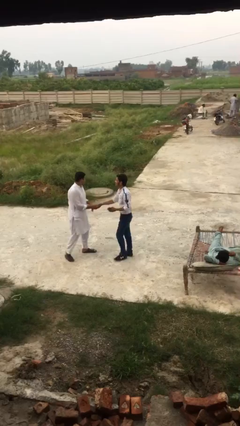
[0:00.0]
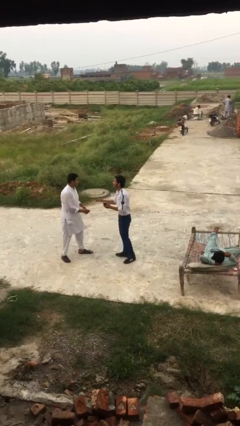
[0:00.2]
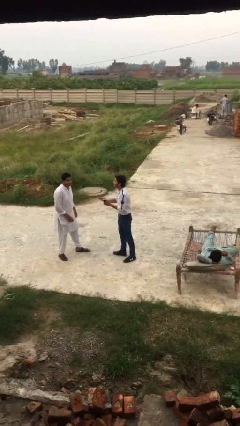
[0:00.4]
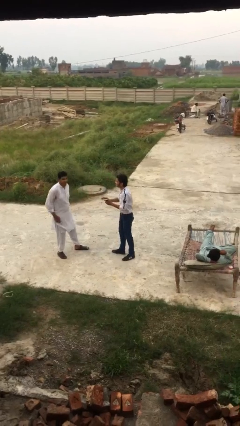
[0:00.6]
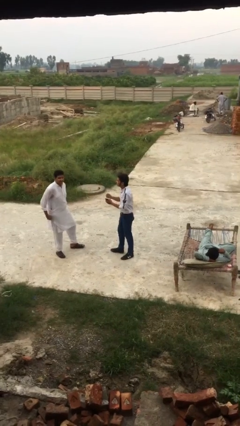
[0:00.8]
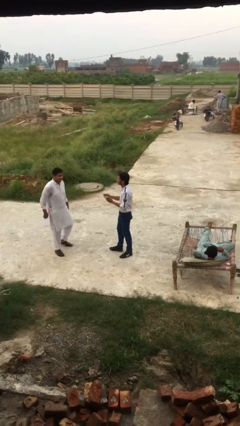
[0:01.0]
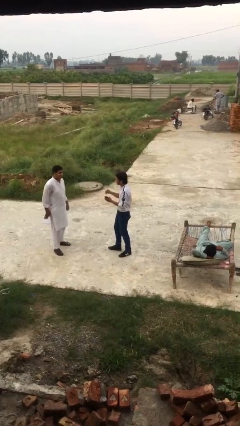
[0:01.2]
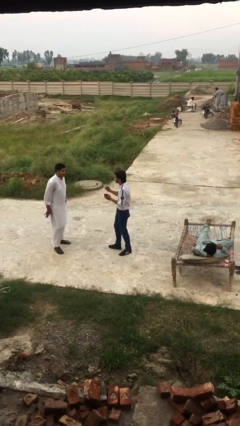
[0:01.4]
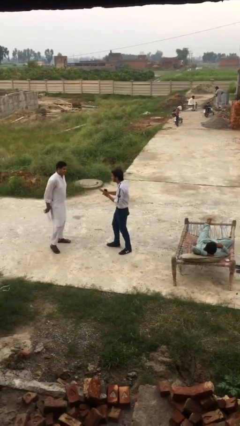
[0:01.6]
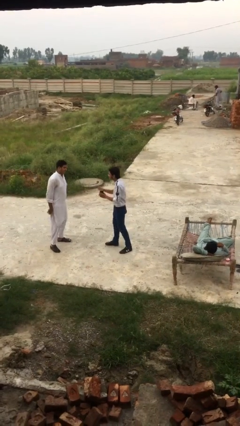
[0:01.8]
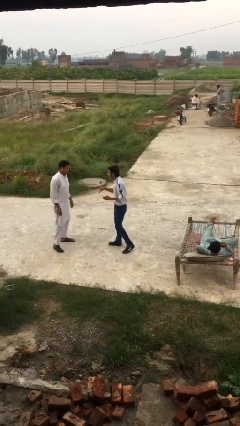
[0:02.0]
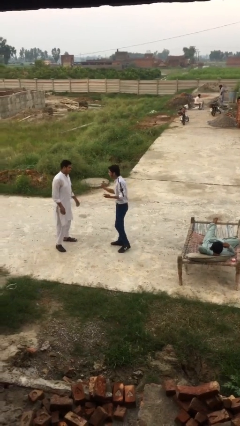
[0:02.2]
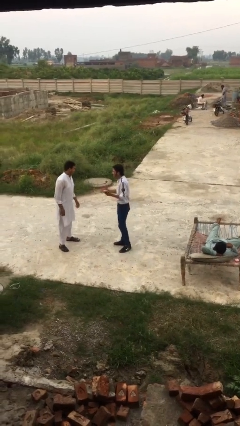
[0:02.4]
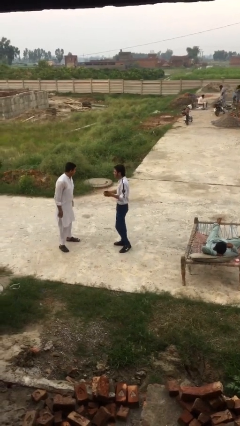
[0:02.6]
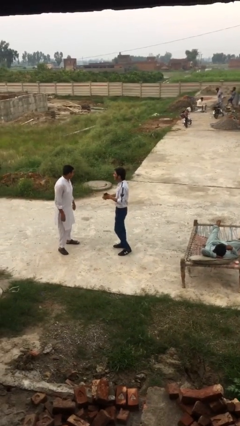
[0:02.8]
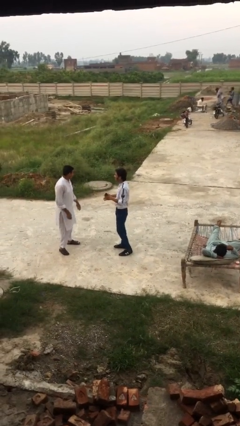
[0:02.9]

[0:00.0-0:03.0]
person talks to person

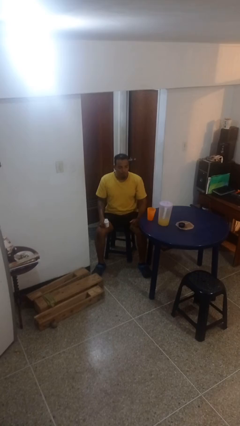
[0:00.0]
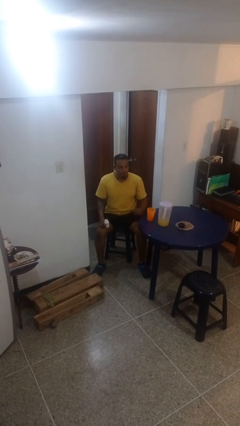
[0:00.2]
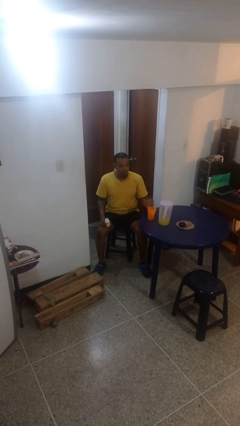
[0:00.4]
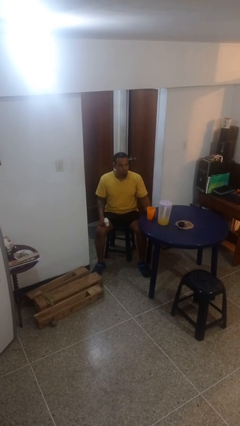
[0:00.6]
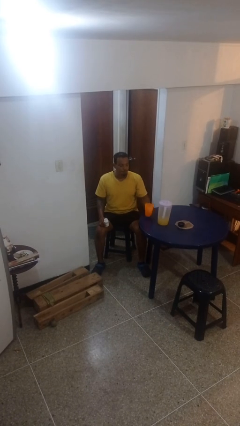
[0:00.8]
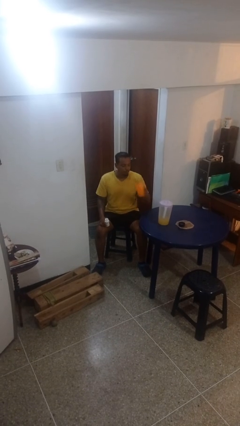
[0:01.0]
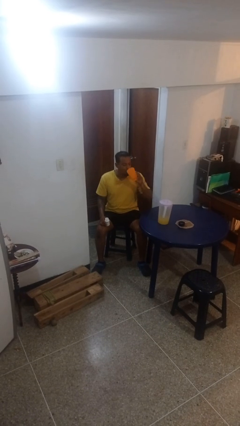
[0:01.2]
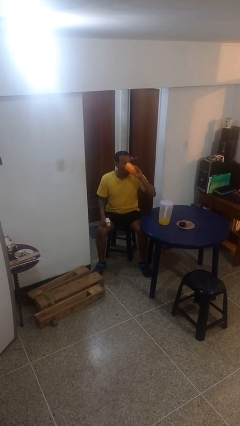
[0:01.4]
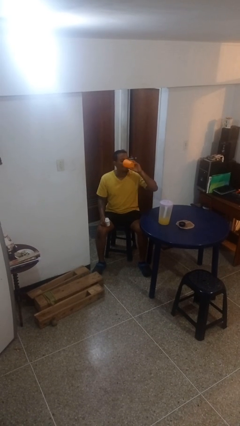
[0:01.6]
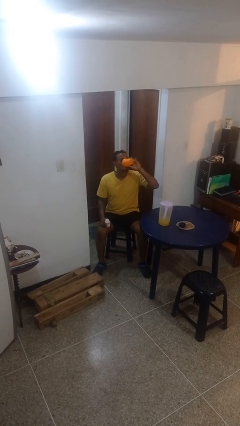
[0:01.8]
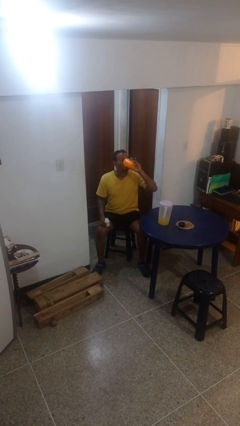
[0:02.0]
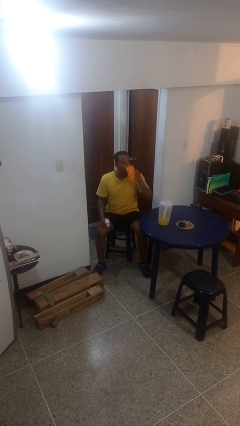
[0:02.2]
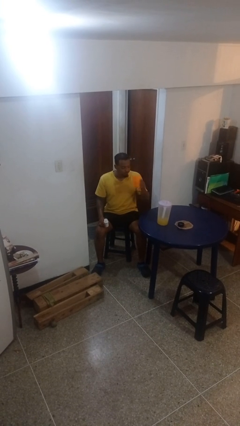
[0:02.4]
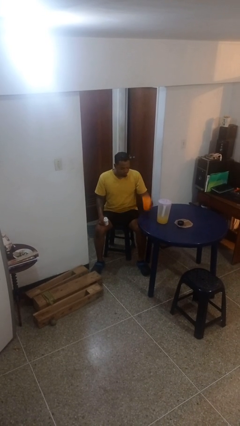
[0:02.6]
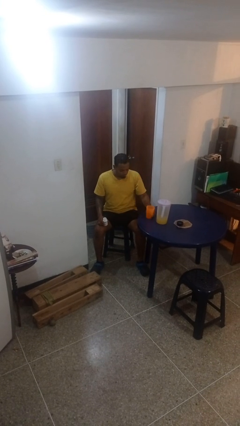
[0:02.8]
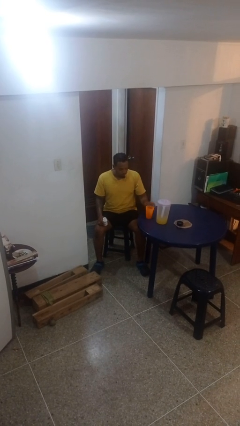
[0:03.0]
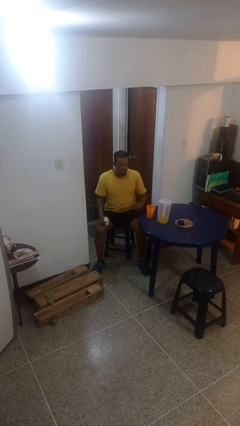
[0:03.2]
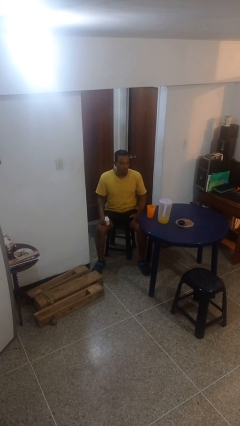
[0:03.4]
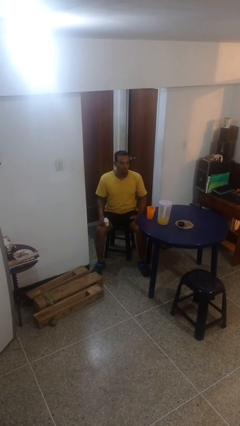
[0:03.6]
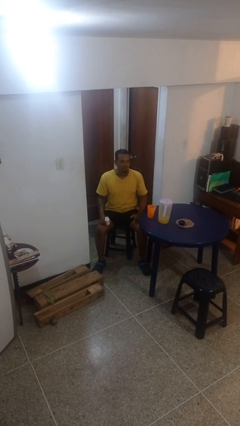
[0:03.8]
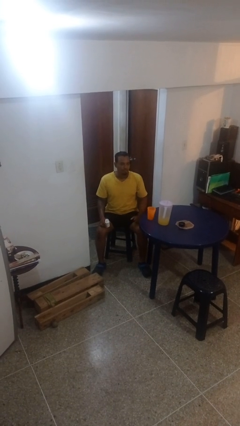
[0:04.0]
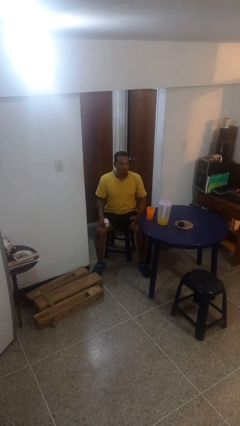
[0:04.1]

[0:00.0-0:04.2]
person drinks from cup

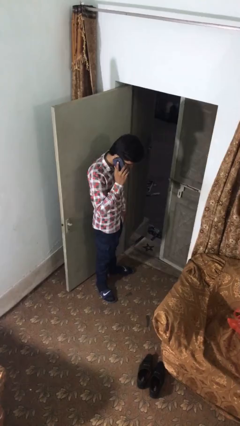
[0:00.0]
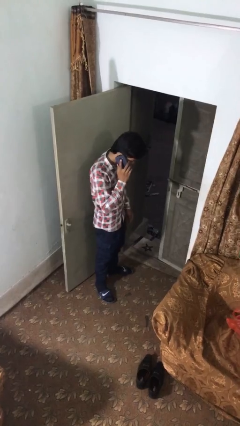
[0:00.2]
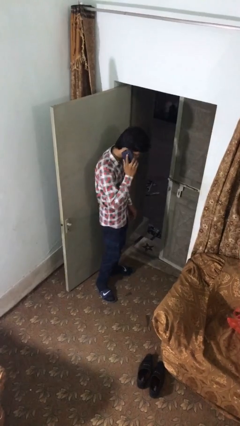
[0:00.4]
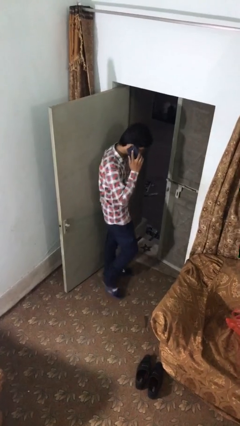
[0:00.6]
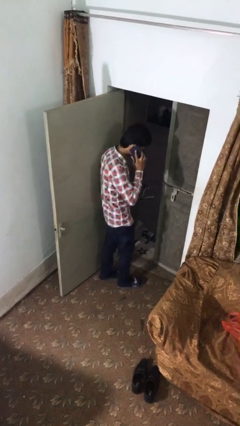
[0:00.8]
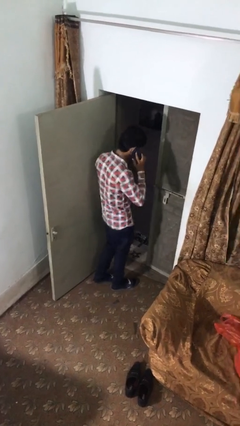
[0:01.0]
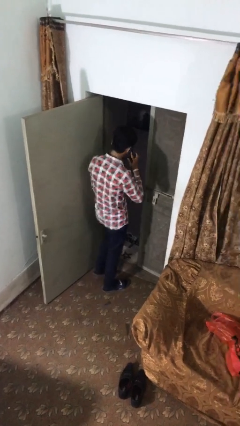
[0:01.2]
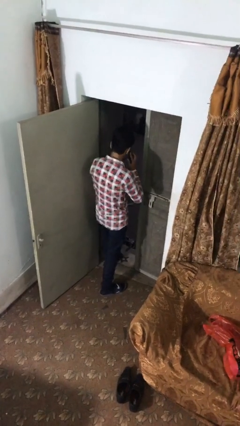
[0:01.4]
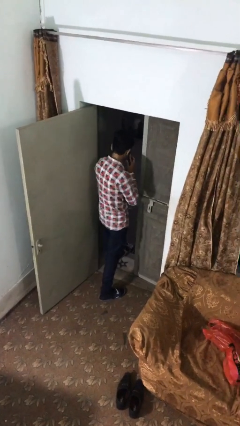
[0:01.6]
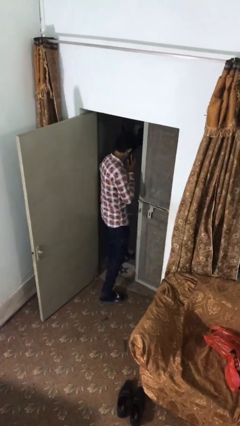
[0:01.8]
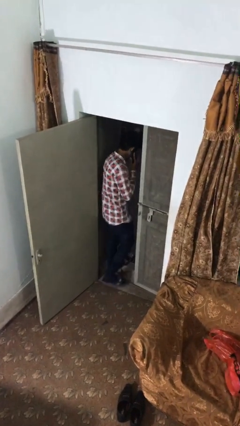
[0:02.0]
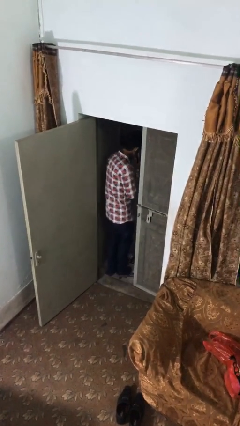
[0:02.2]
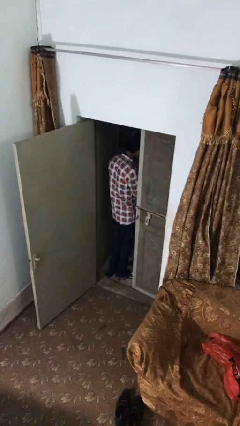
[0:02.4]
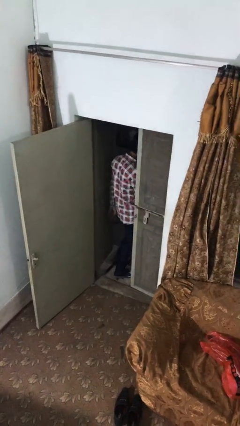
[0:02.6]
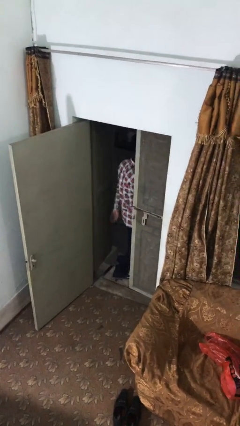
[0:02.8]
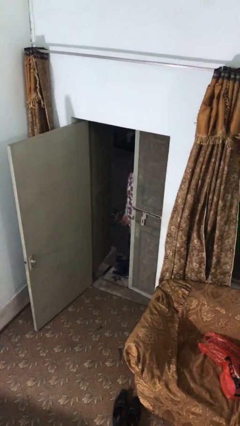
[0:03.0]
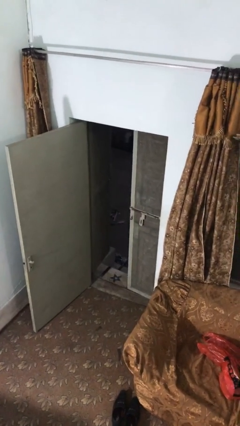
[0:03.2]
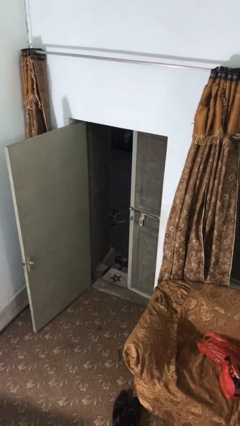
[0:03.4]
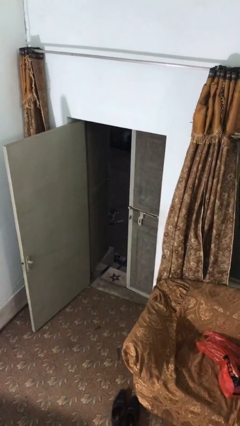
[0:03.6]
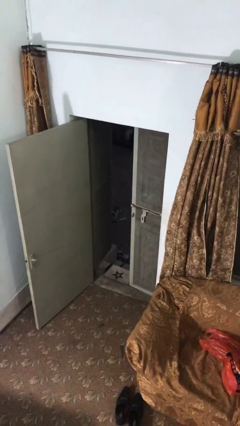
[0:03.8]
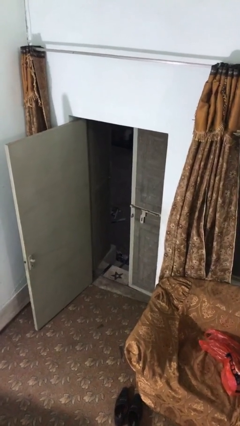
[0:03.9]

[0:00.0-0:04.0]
person exits scene through structure

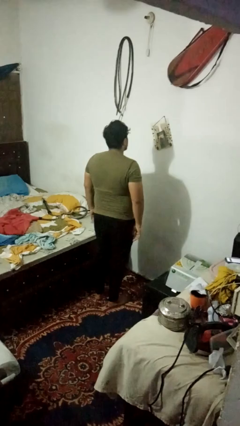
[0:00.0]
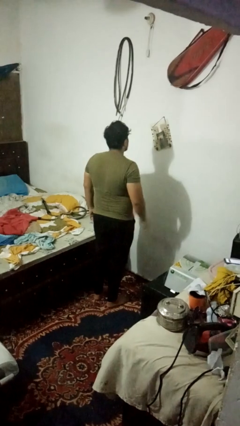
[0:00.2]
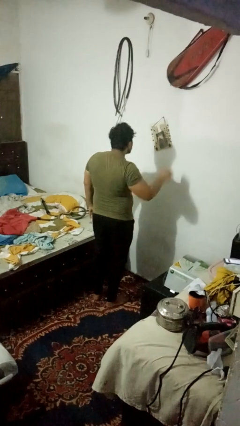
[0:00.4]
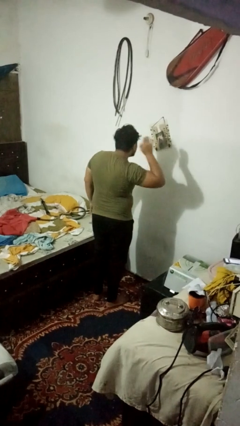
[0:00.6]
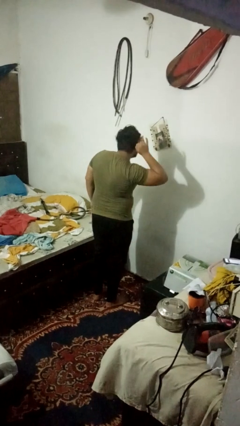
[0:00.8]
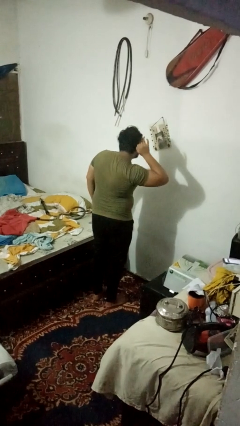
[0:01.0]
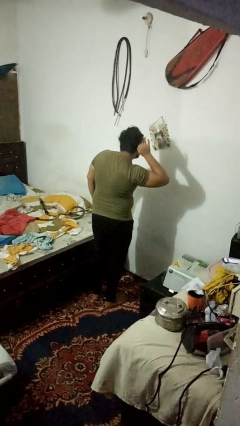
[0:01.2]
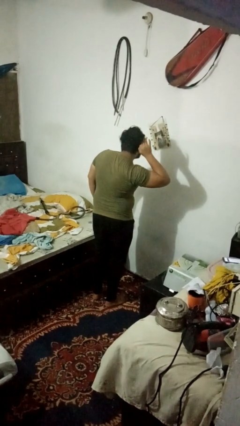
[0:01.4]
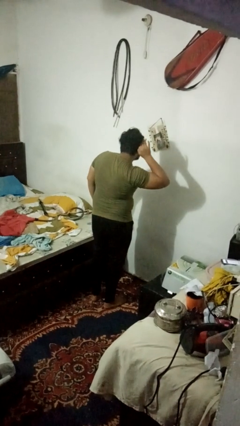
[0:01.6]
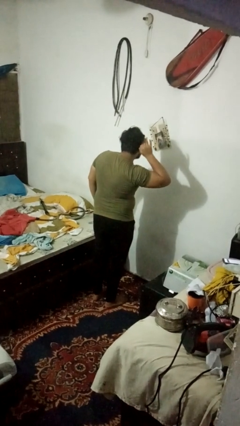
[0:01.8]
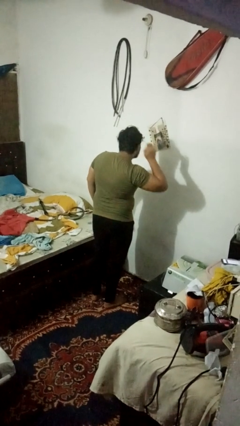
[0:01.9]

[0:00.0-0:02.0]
person gestures listen closely

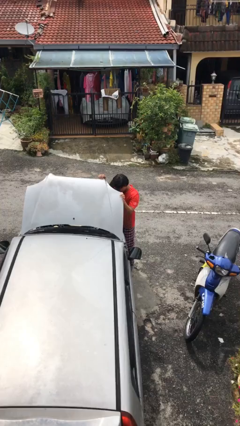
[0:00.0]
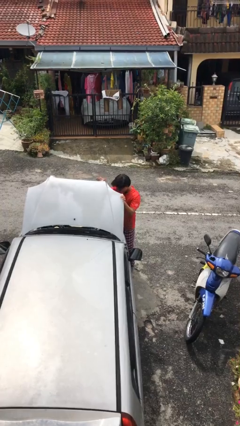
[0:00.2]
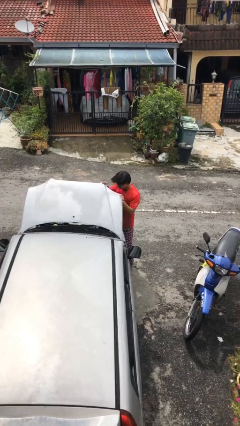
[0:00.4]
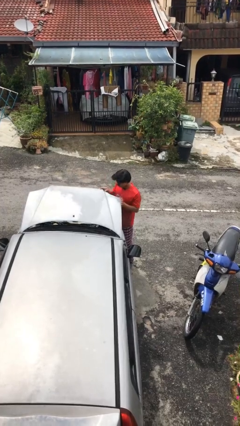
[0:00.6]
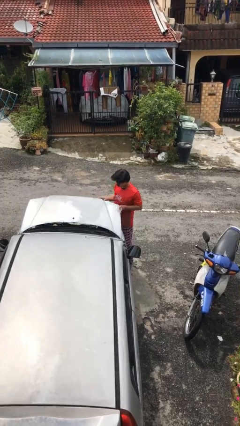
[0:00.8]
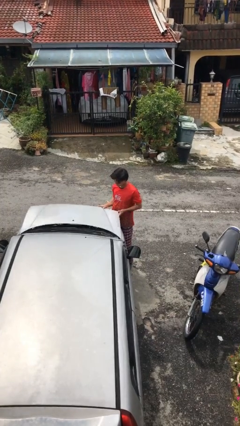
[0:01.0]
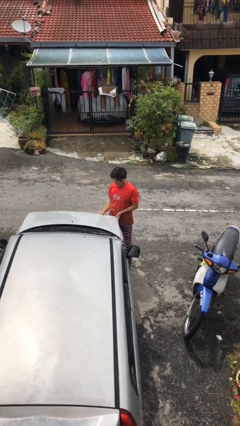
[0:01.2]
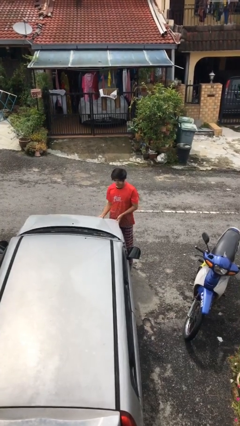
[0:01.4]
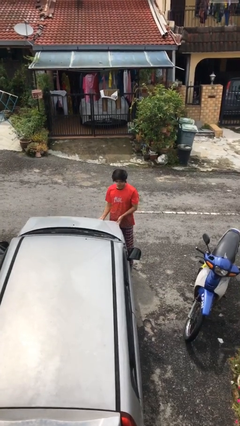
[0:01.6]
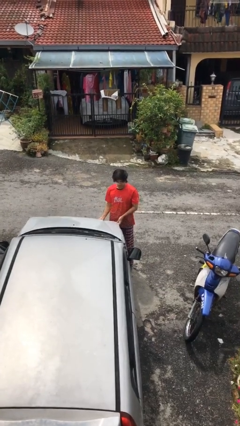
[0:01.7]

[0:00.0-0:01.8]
person closes car hood

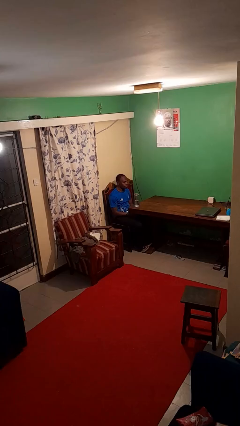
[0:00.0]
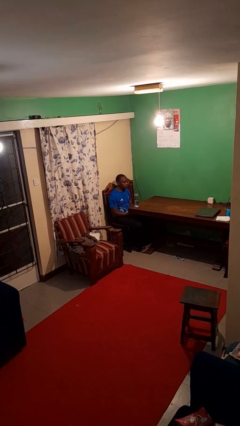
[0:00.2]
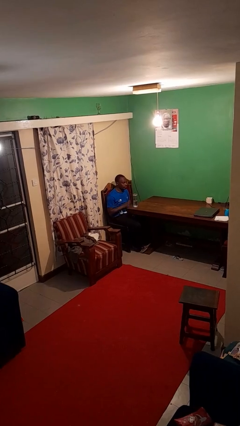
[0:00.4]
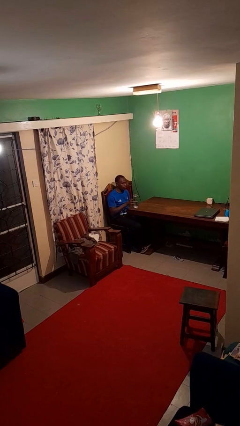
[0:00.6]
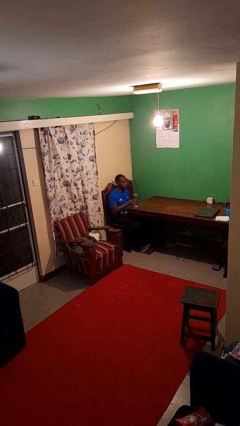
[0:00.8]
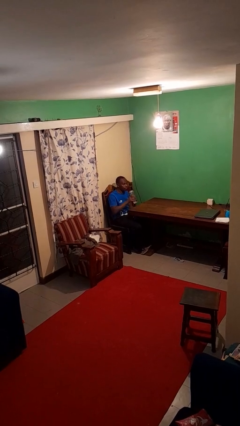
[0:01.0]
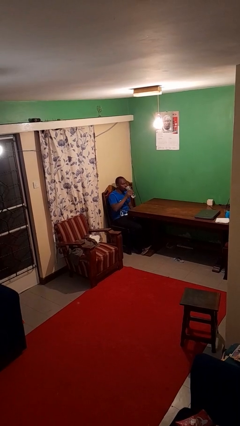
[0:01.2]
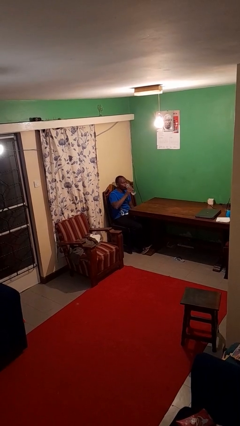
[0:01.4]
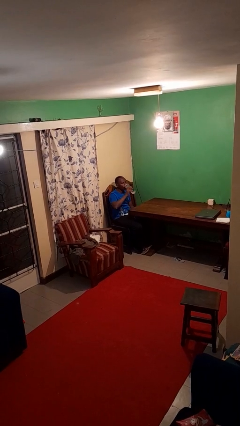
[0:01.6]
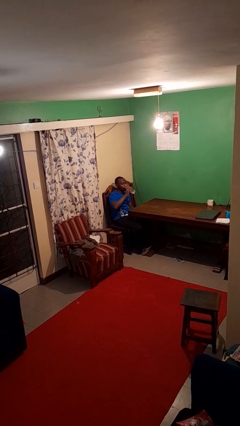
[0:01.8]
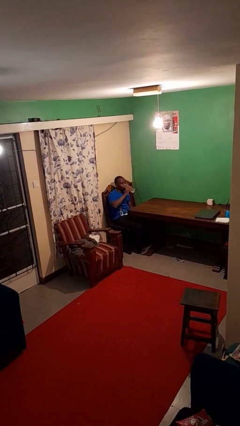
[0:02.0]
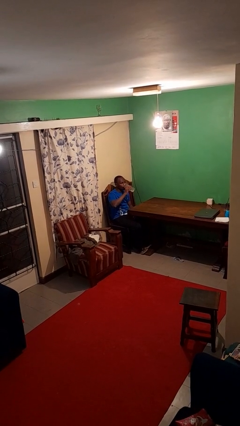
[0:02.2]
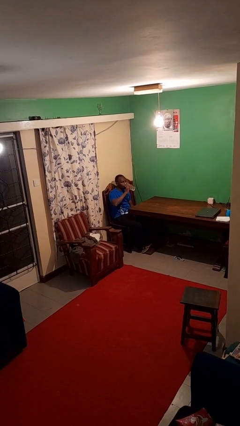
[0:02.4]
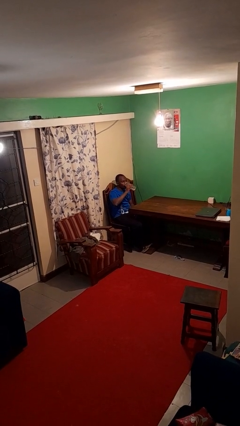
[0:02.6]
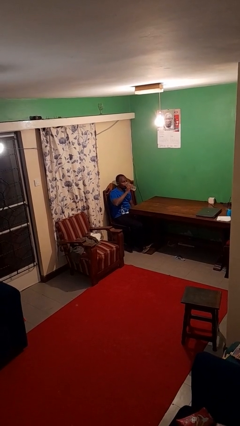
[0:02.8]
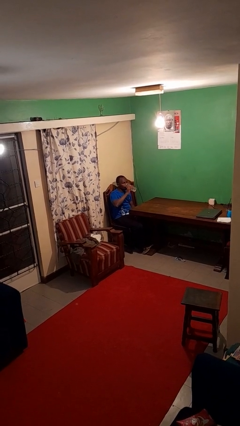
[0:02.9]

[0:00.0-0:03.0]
person drinks from bottle
